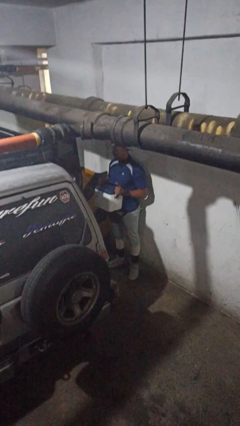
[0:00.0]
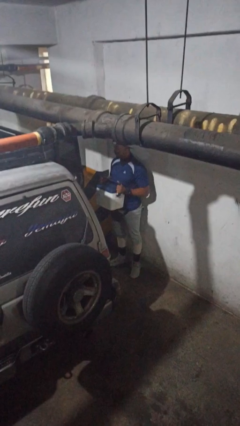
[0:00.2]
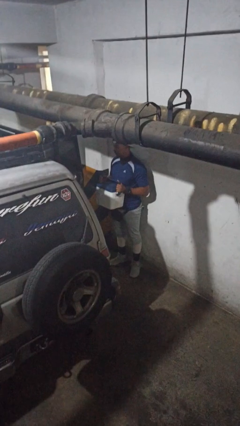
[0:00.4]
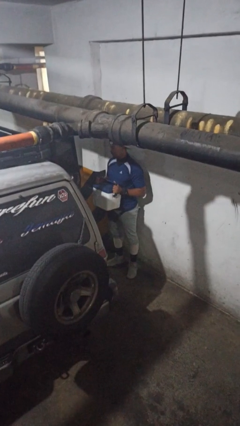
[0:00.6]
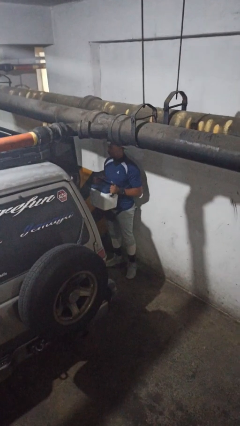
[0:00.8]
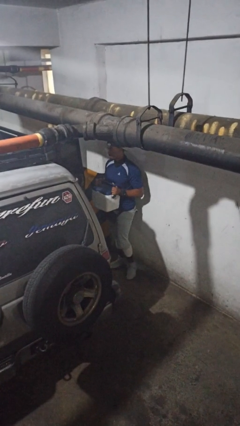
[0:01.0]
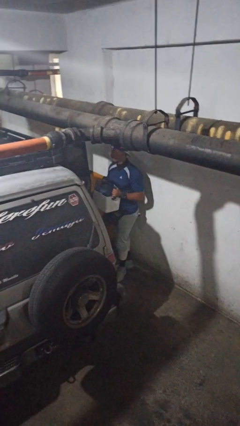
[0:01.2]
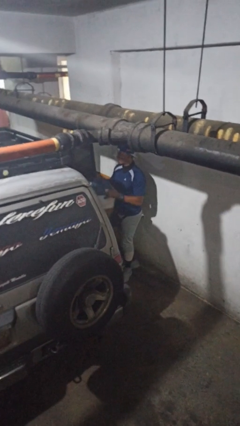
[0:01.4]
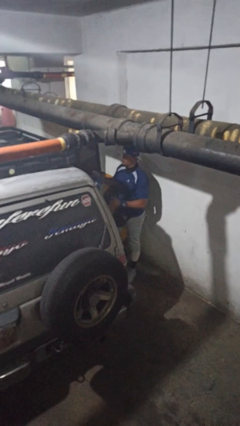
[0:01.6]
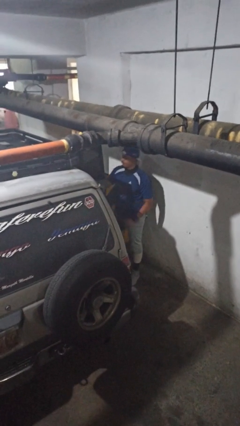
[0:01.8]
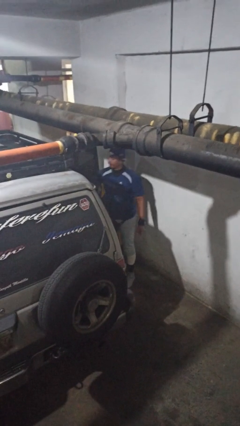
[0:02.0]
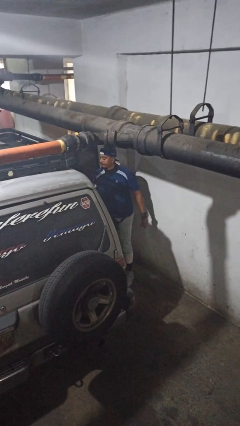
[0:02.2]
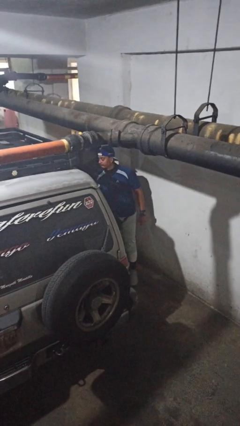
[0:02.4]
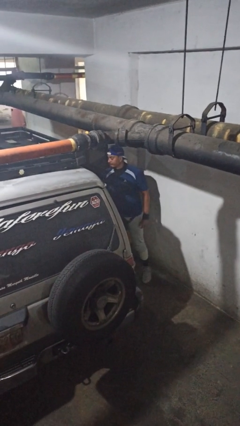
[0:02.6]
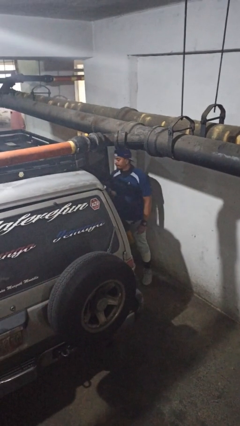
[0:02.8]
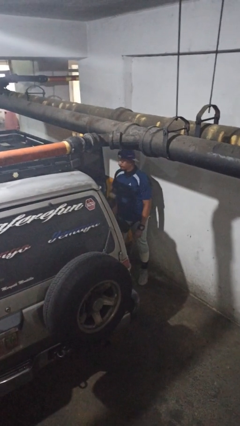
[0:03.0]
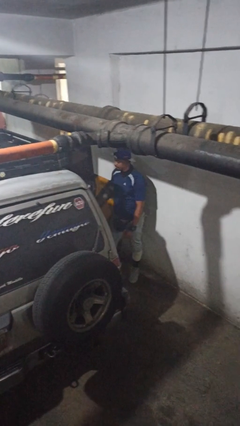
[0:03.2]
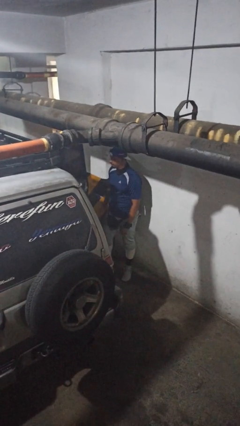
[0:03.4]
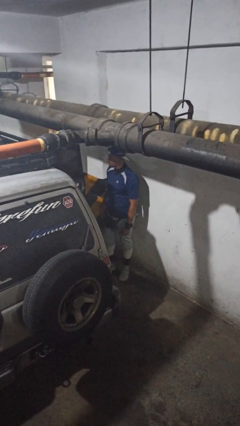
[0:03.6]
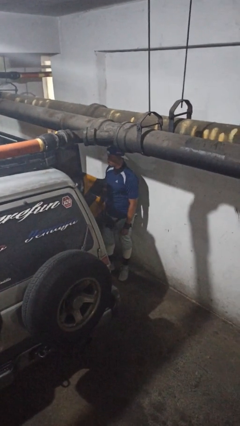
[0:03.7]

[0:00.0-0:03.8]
person loads car

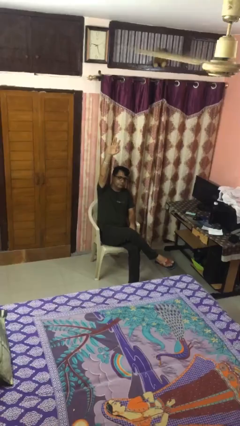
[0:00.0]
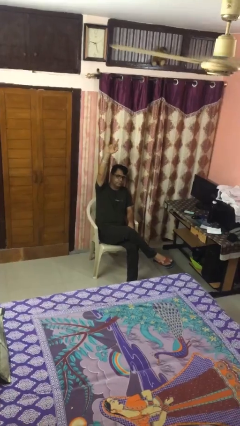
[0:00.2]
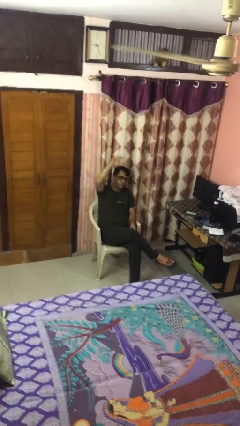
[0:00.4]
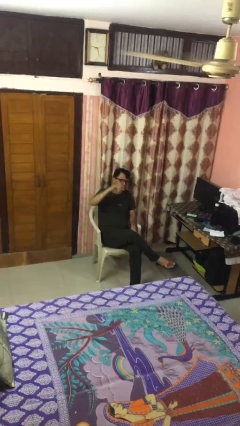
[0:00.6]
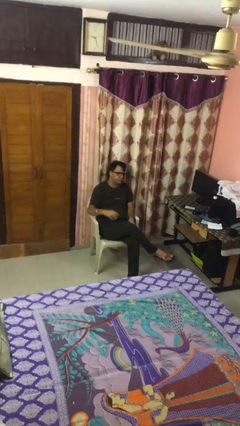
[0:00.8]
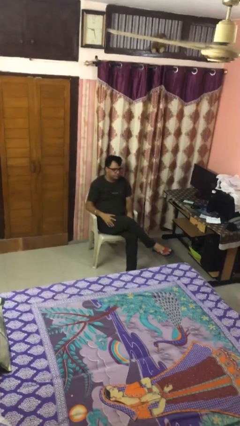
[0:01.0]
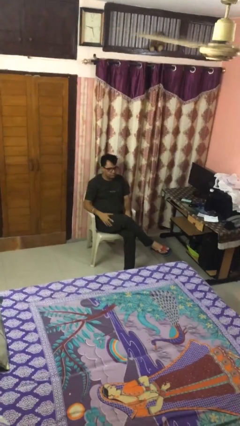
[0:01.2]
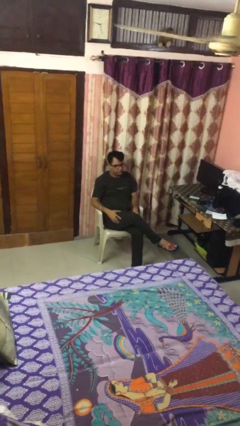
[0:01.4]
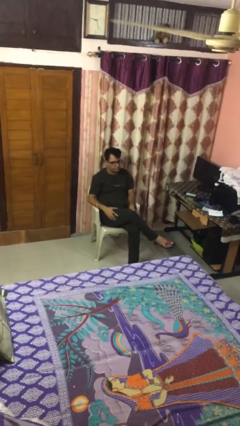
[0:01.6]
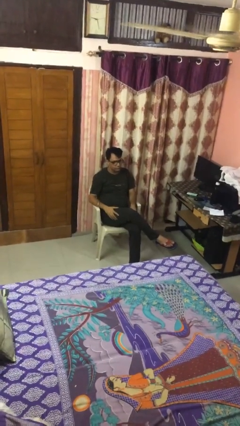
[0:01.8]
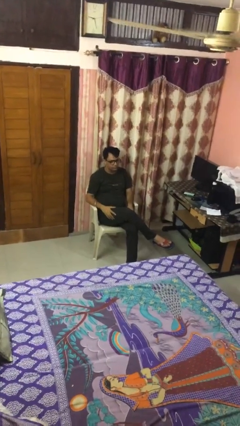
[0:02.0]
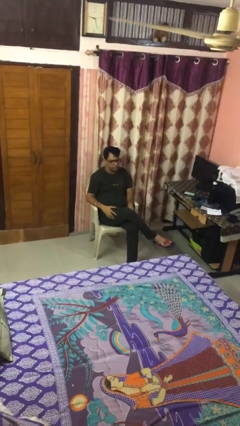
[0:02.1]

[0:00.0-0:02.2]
person gestures lower hand

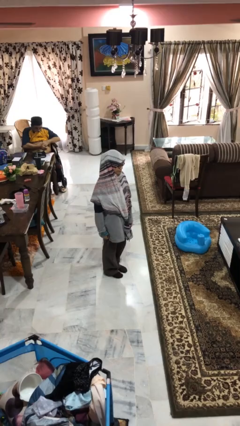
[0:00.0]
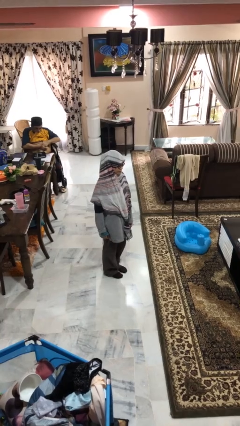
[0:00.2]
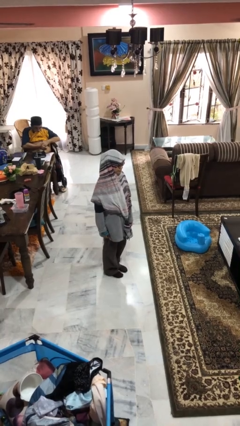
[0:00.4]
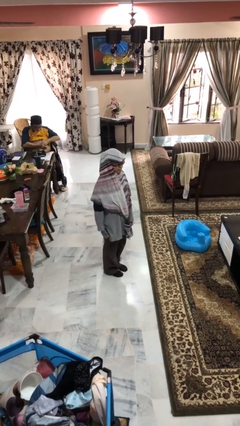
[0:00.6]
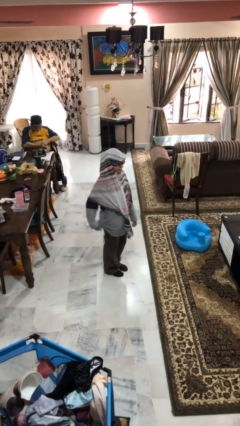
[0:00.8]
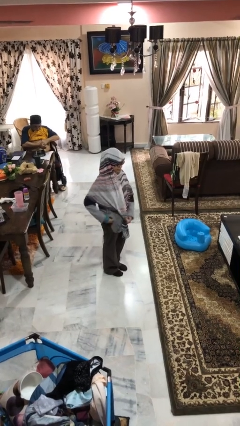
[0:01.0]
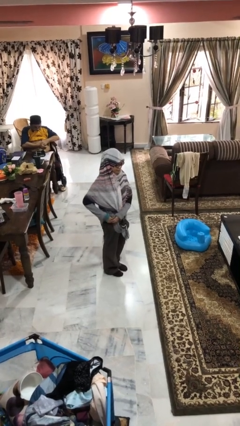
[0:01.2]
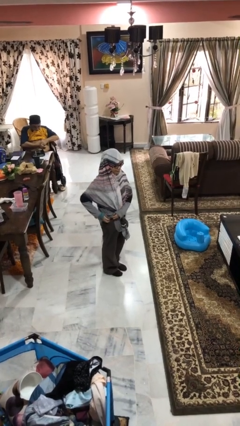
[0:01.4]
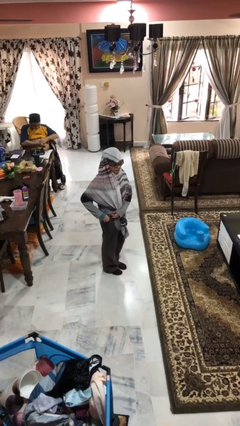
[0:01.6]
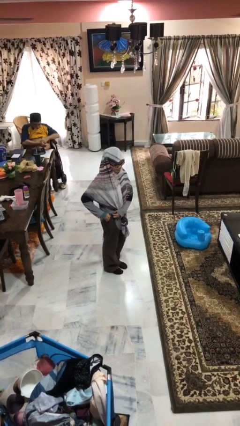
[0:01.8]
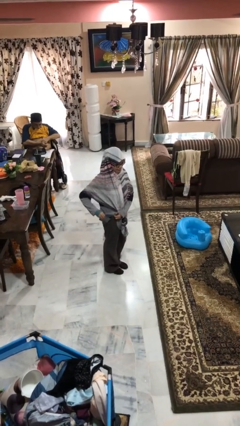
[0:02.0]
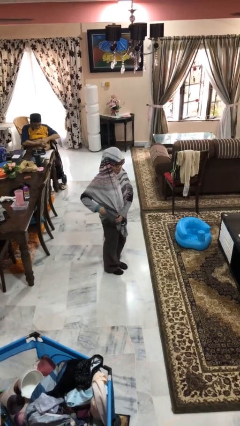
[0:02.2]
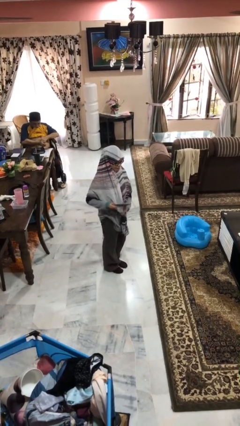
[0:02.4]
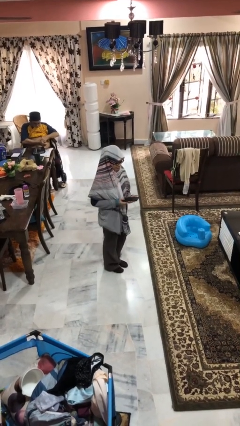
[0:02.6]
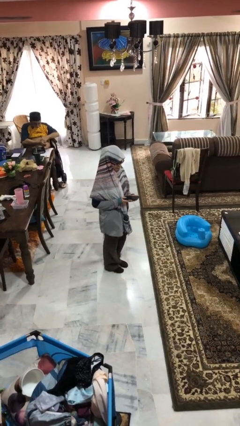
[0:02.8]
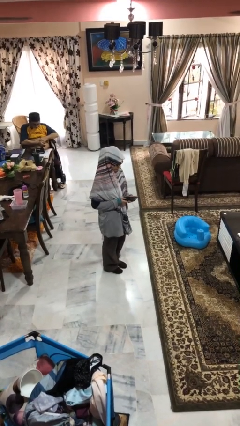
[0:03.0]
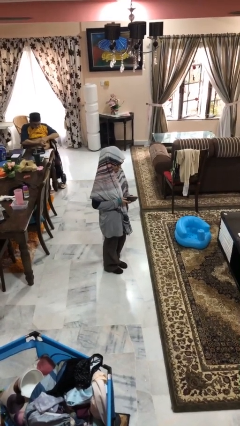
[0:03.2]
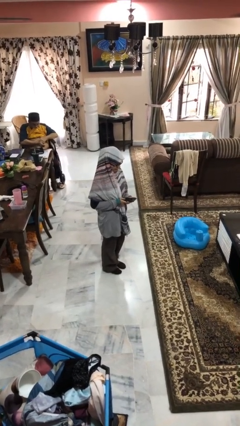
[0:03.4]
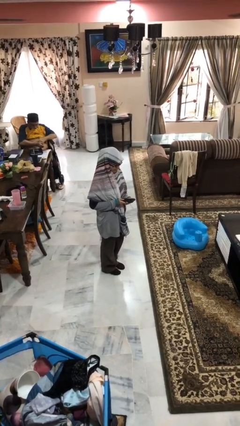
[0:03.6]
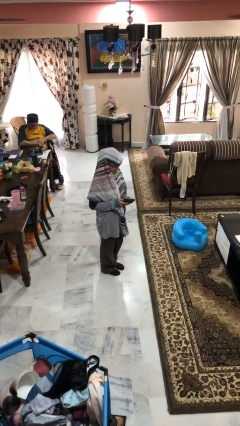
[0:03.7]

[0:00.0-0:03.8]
person takes phone from pocket

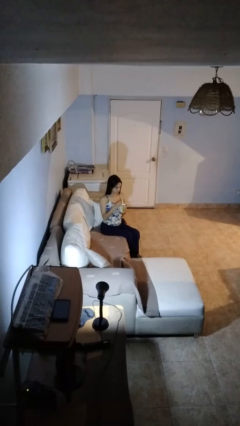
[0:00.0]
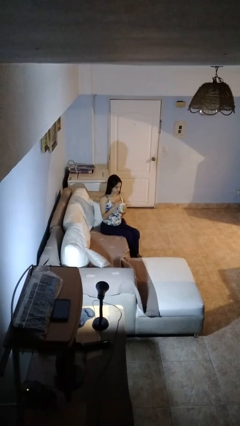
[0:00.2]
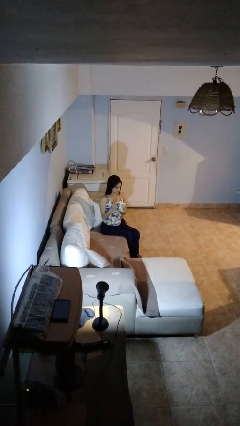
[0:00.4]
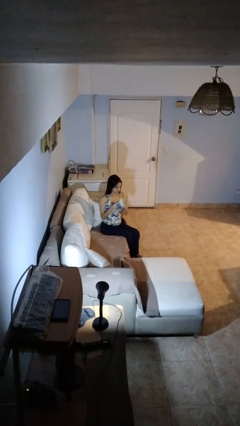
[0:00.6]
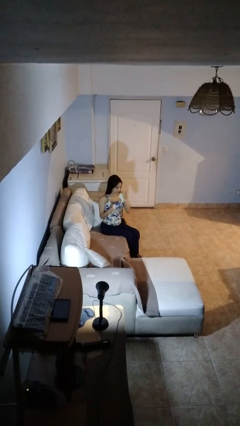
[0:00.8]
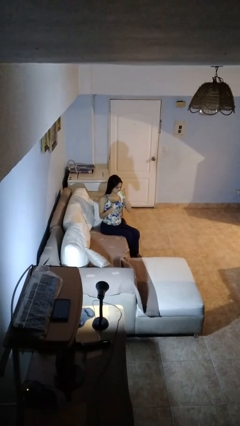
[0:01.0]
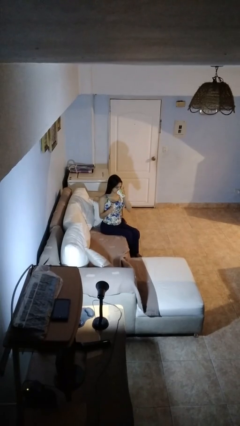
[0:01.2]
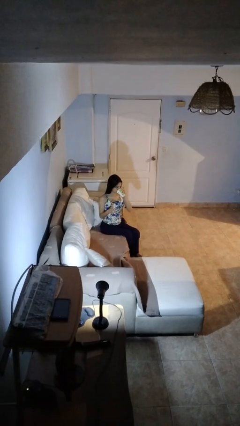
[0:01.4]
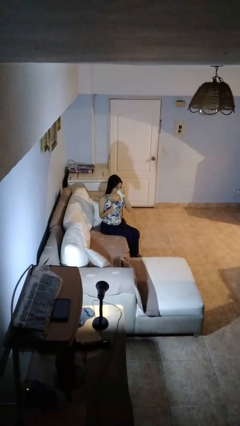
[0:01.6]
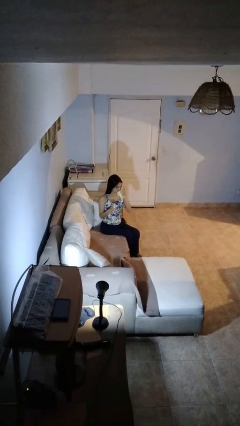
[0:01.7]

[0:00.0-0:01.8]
person drinks from mug

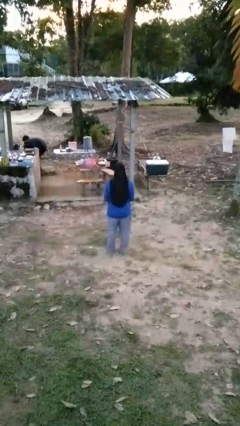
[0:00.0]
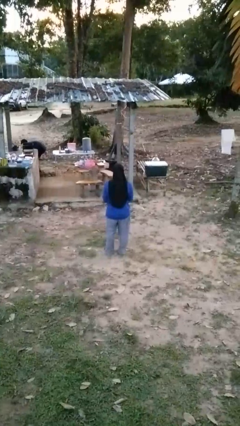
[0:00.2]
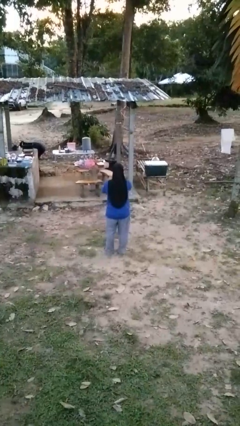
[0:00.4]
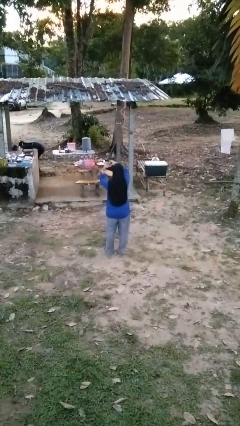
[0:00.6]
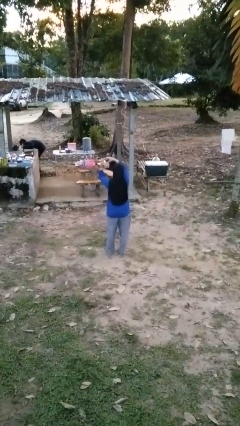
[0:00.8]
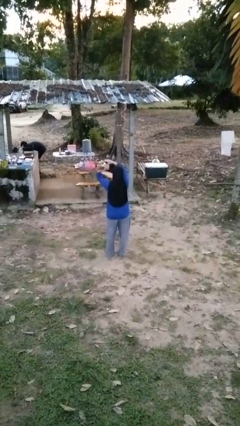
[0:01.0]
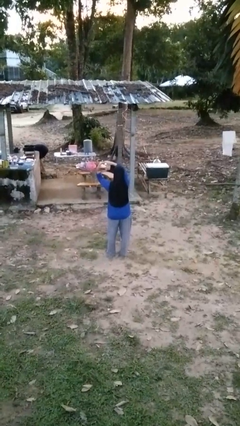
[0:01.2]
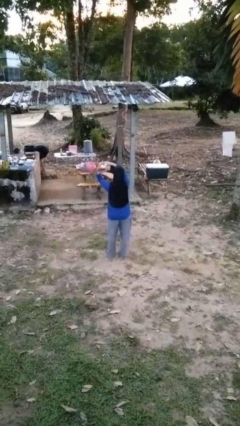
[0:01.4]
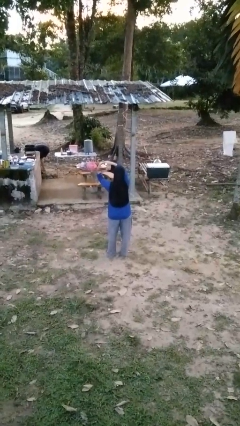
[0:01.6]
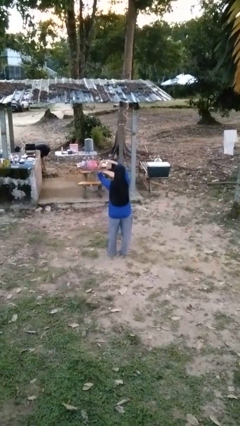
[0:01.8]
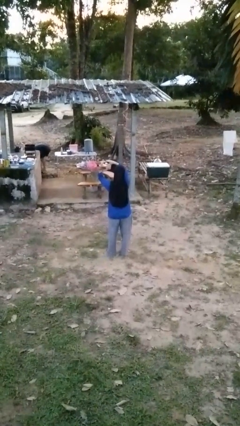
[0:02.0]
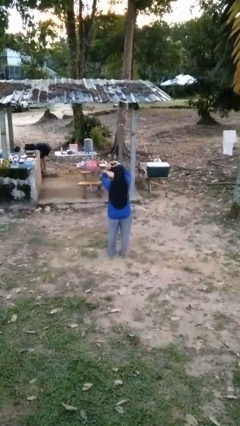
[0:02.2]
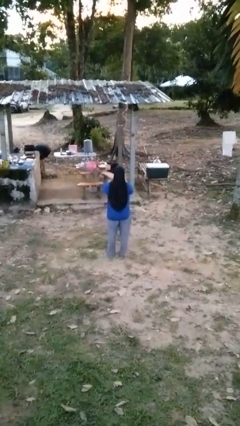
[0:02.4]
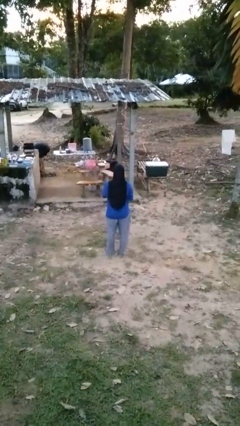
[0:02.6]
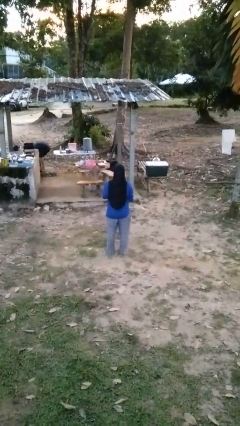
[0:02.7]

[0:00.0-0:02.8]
person gestures heart

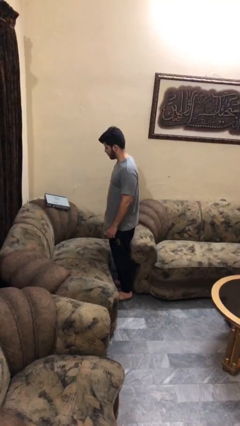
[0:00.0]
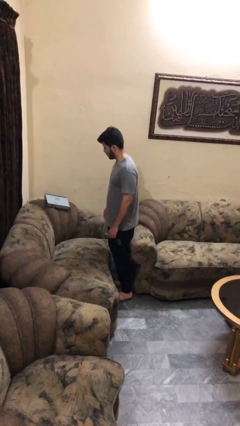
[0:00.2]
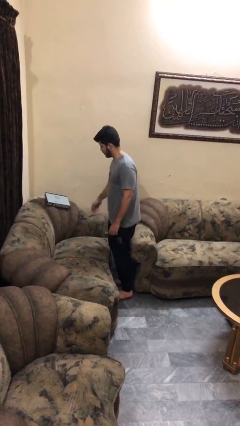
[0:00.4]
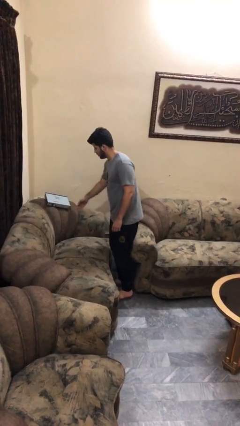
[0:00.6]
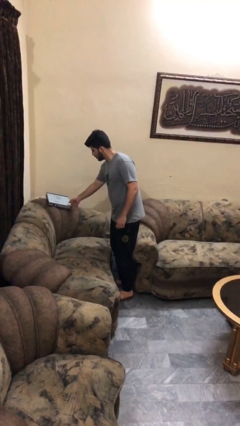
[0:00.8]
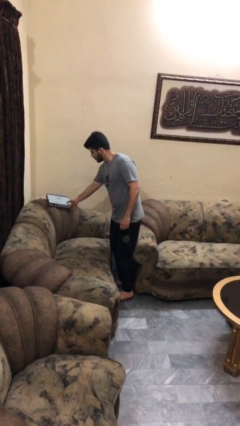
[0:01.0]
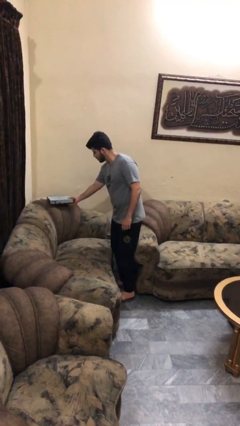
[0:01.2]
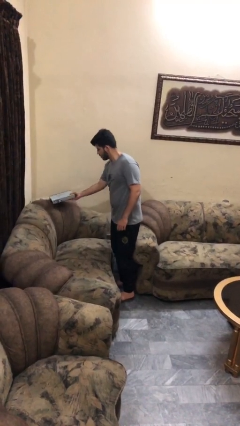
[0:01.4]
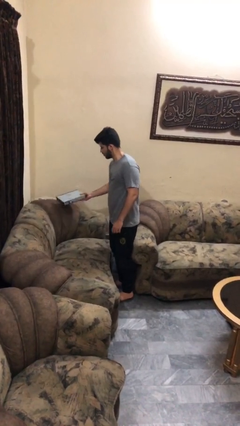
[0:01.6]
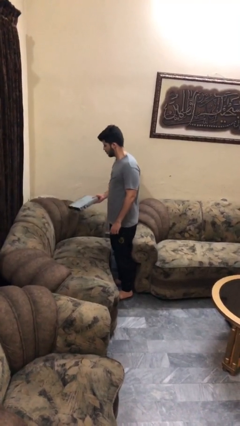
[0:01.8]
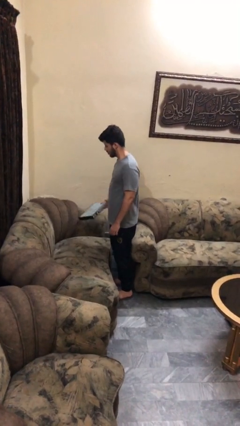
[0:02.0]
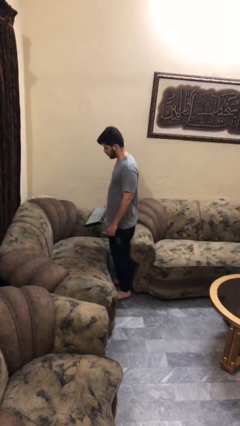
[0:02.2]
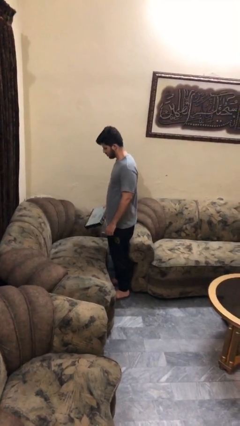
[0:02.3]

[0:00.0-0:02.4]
person picks up object from couch

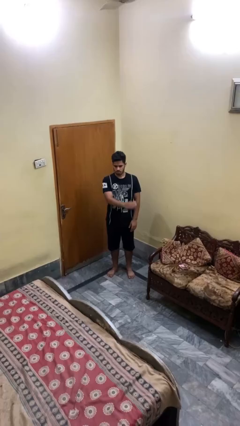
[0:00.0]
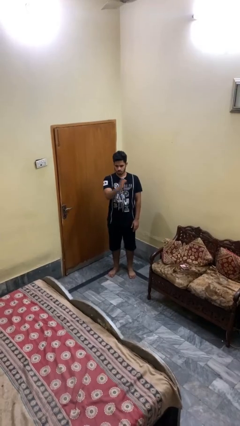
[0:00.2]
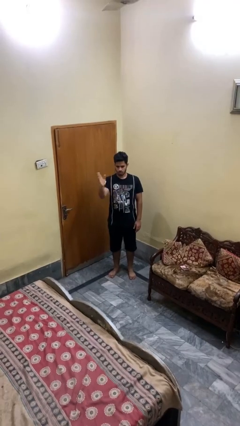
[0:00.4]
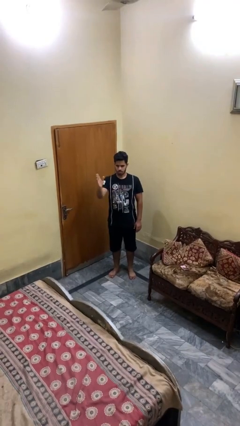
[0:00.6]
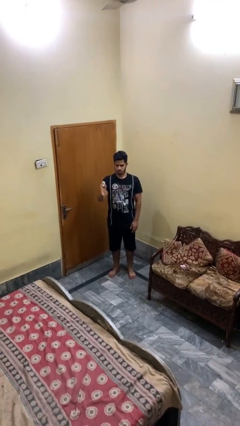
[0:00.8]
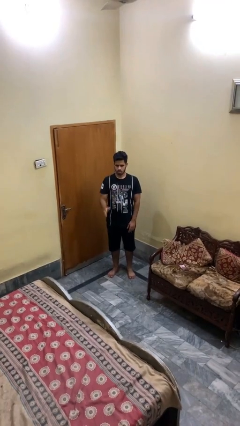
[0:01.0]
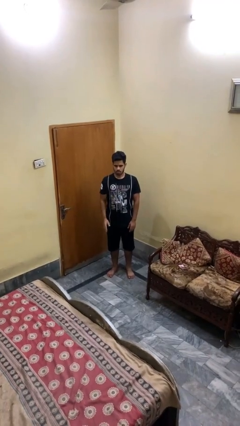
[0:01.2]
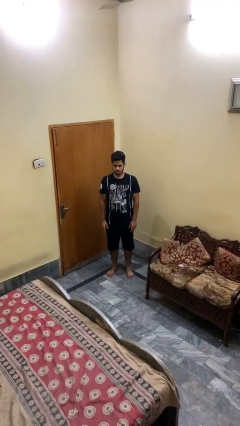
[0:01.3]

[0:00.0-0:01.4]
person gestures swipe right
